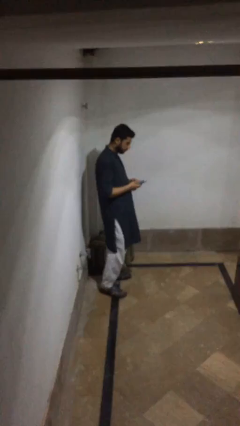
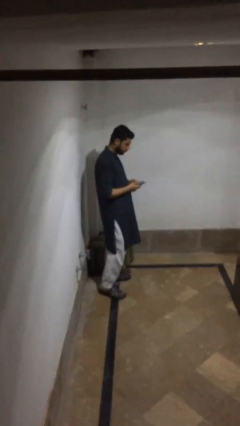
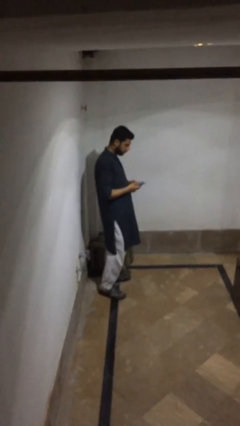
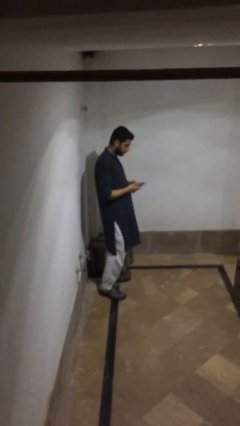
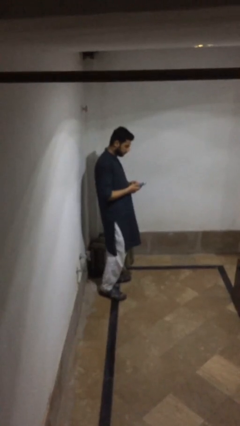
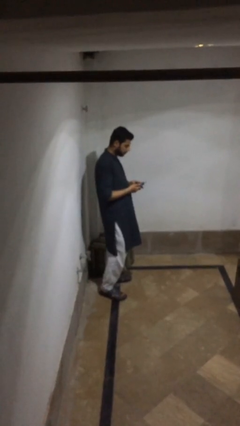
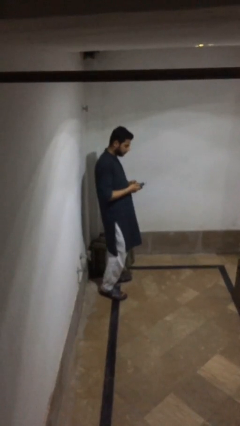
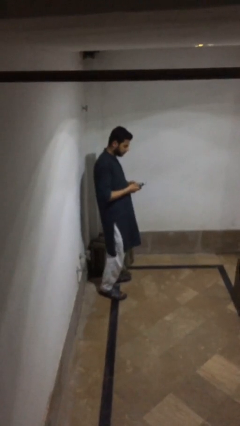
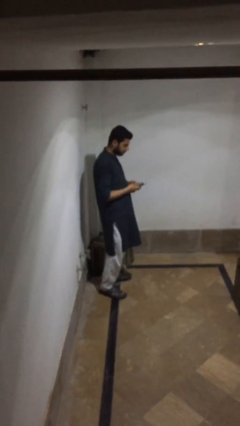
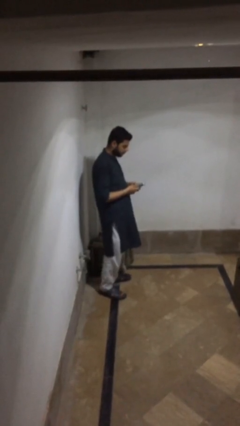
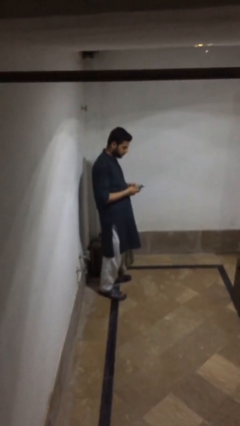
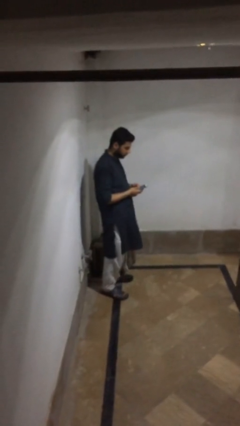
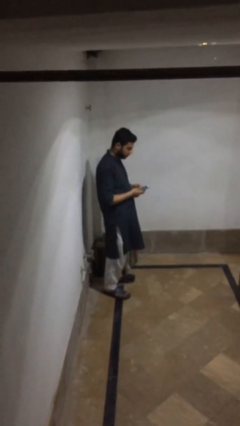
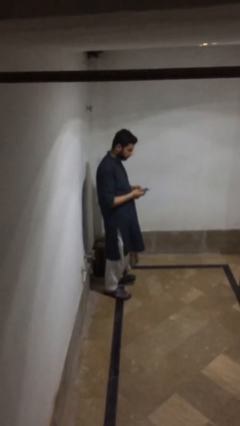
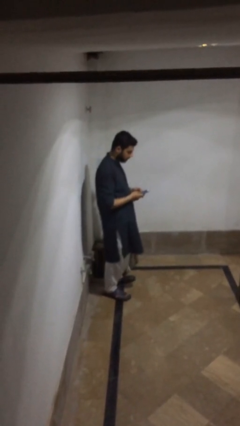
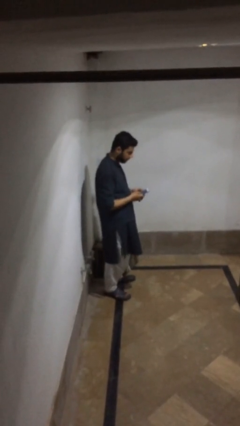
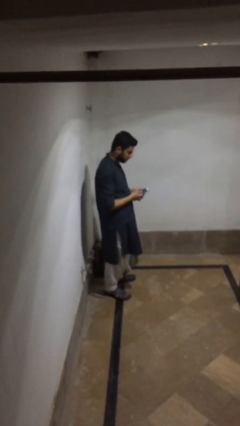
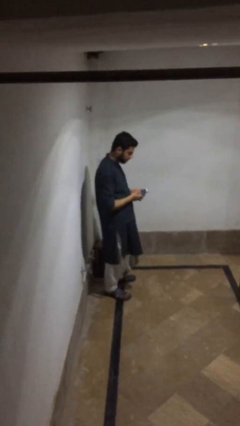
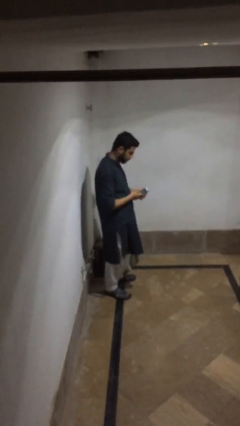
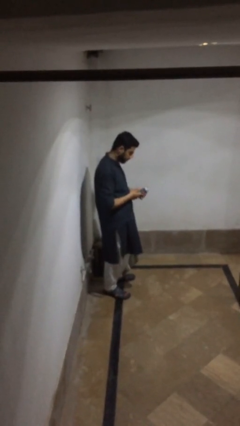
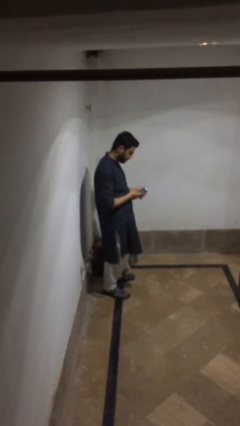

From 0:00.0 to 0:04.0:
person texts on phone

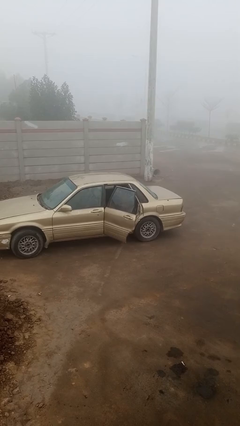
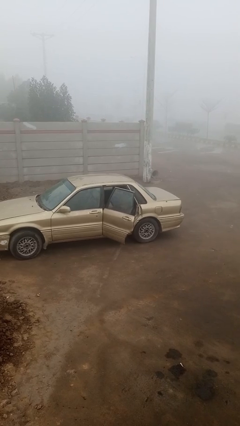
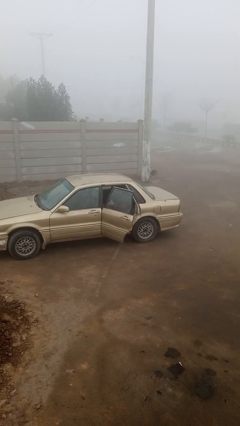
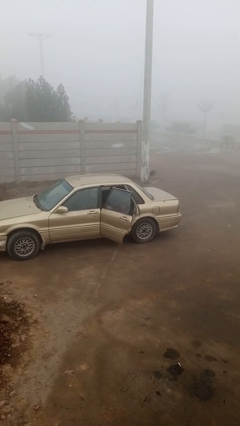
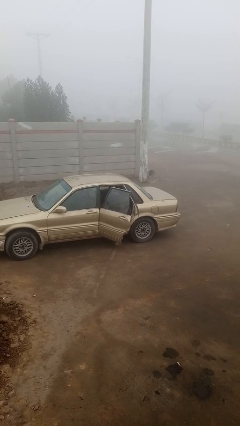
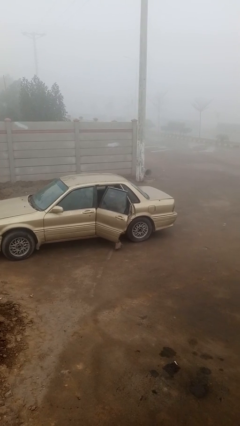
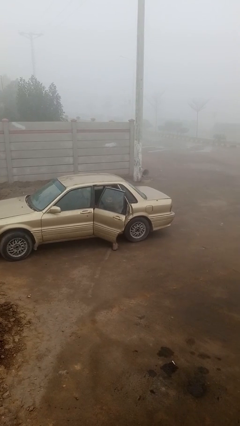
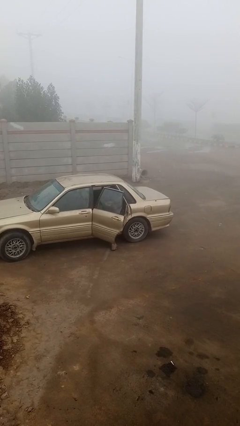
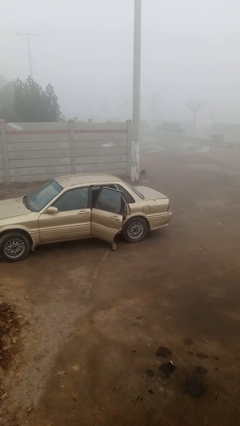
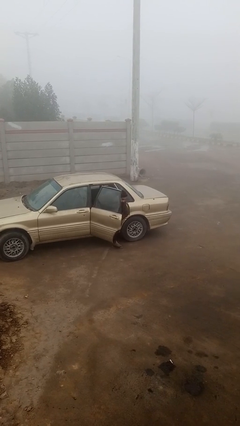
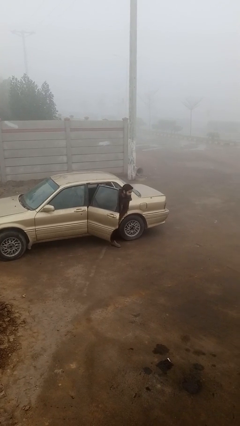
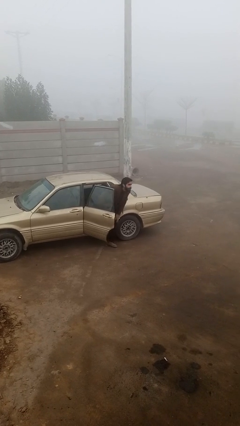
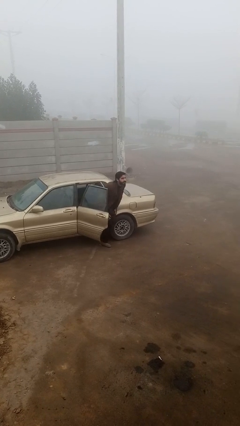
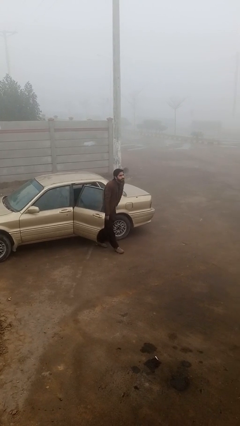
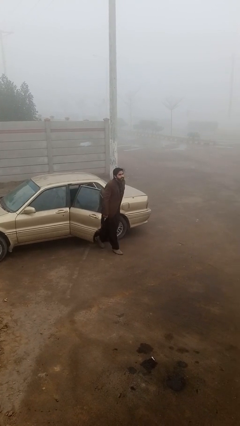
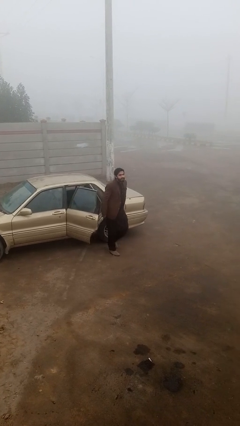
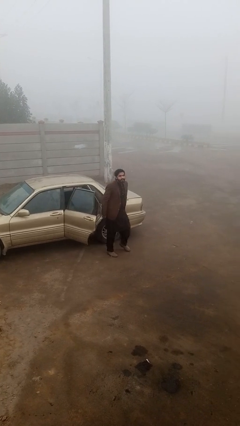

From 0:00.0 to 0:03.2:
person exits car

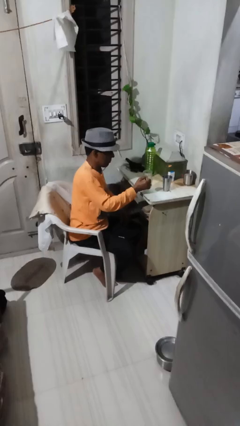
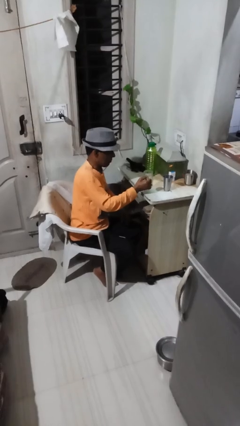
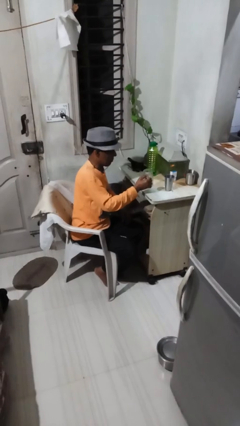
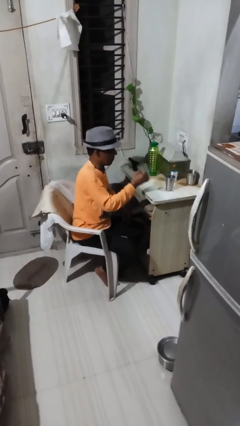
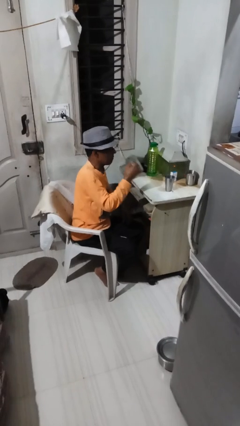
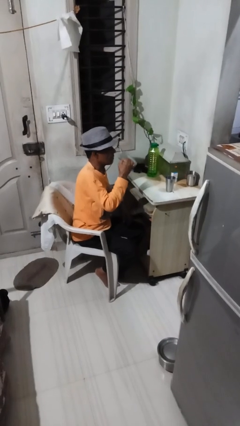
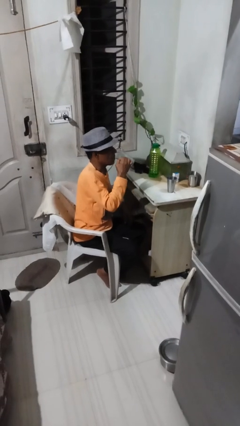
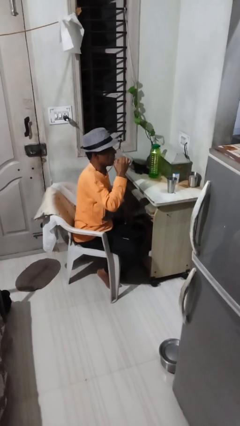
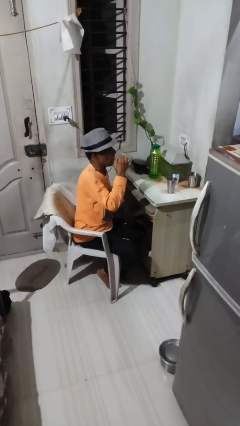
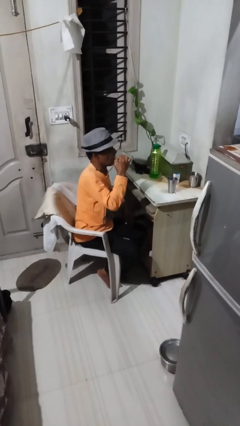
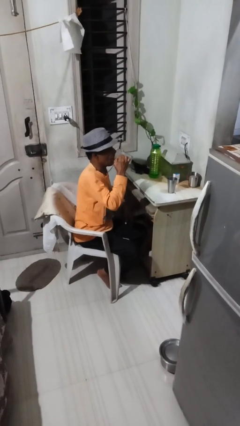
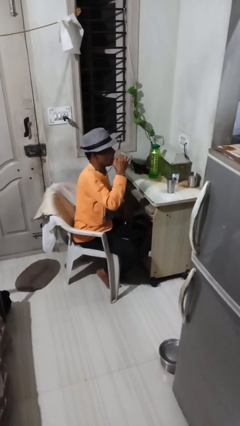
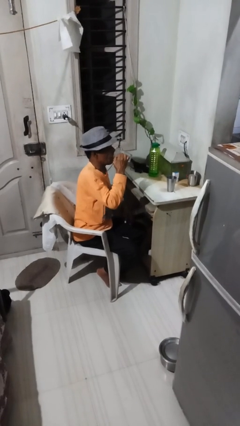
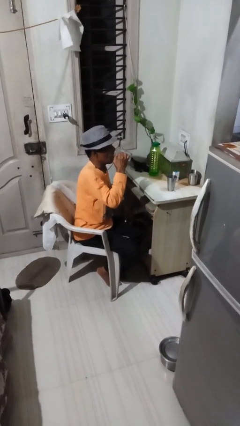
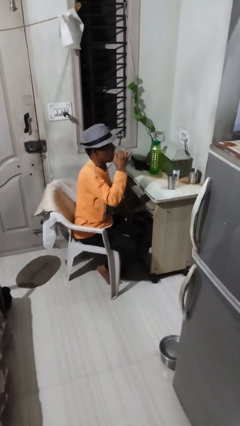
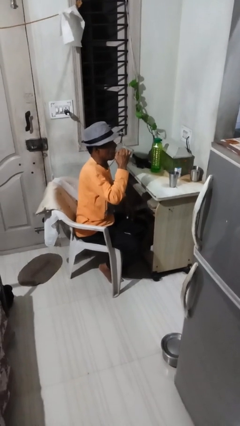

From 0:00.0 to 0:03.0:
person drinks from mug

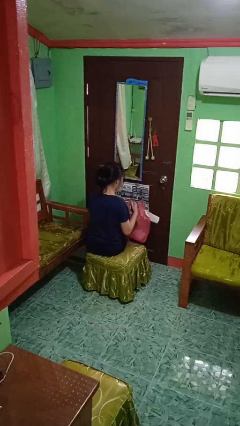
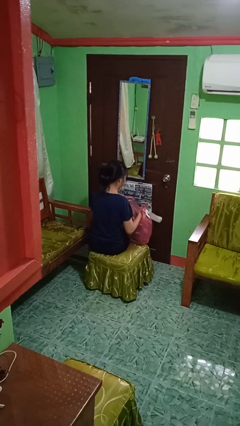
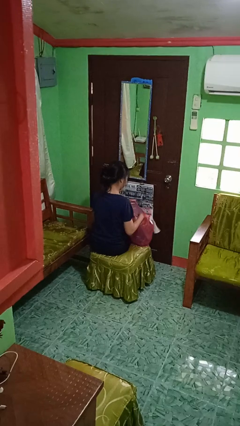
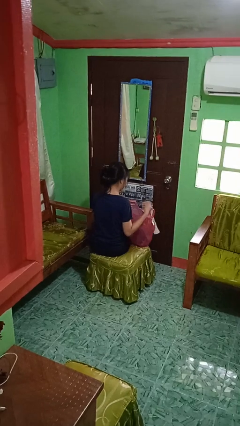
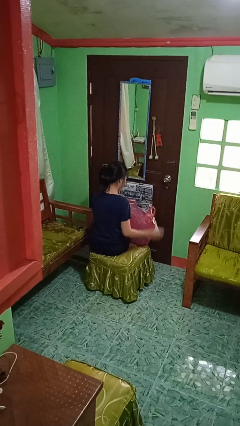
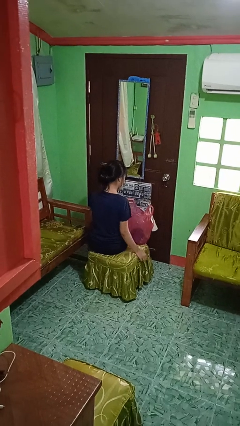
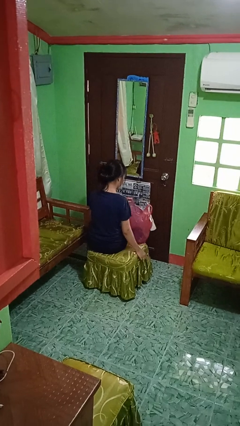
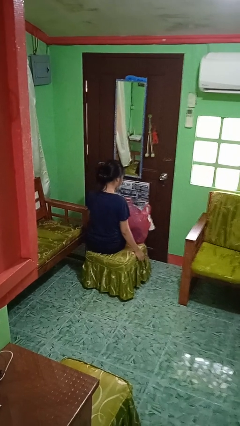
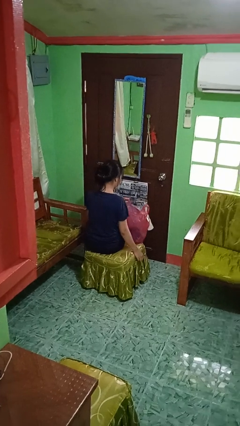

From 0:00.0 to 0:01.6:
person puts object into bag

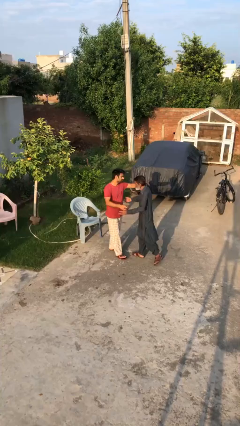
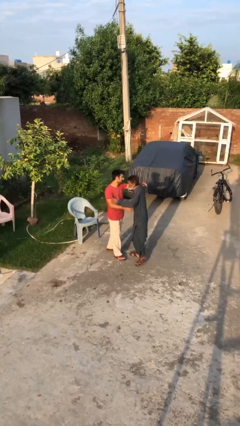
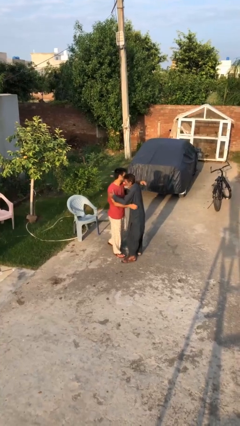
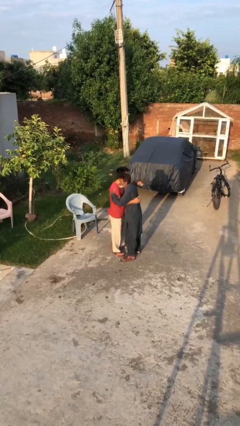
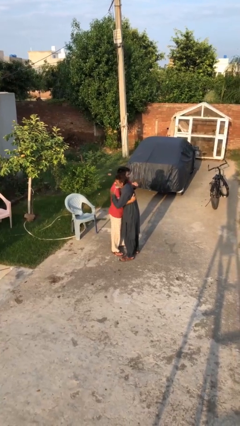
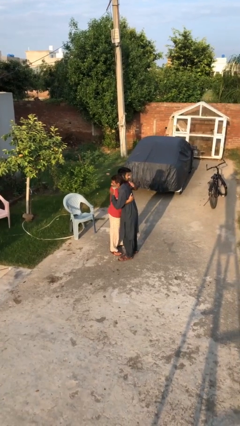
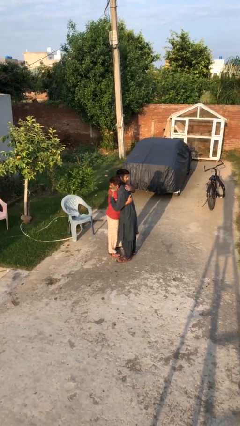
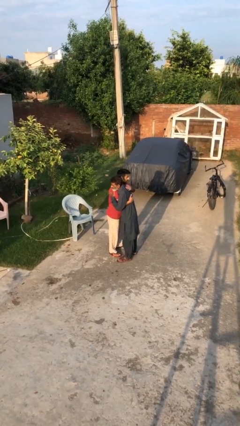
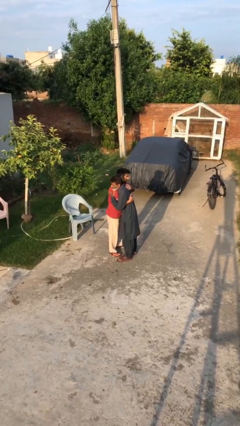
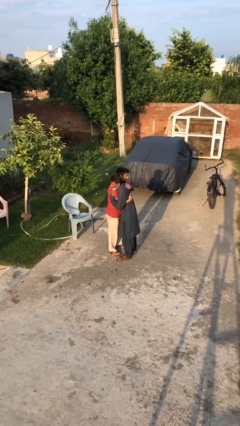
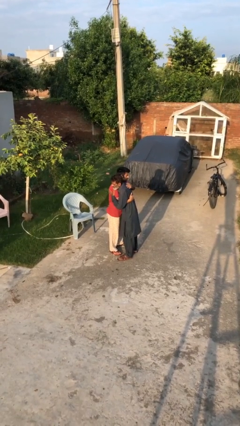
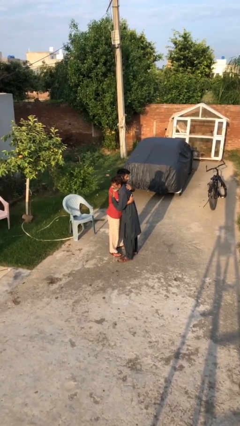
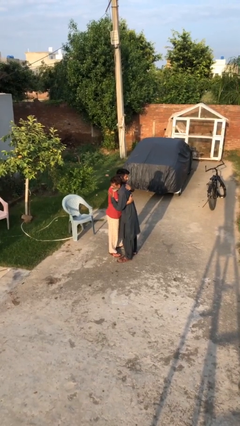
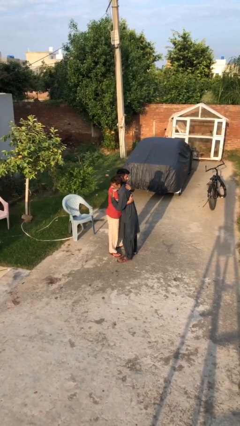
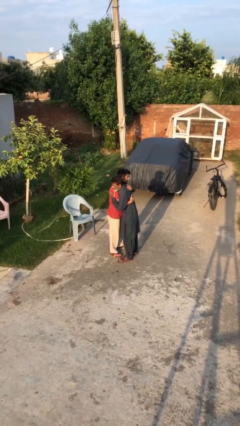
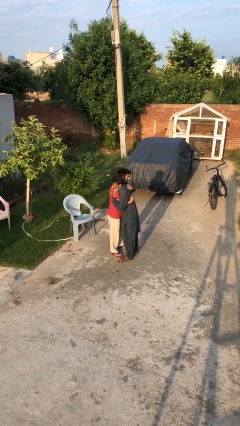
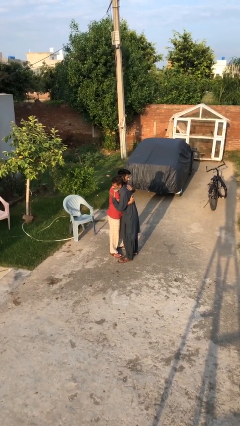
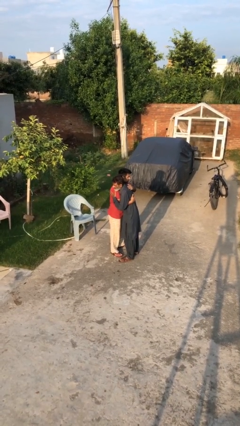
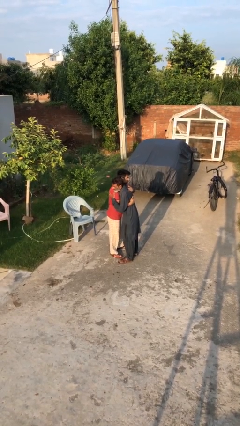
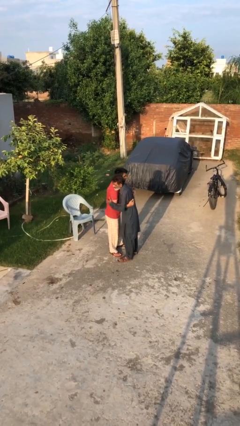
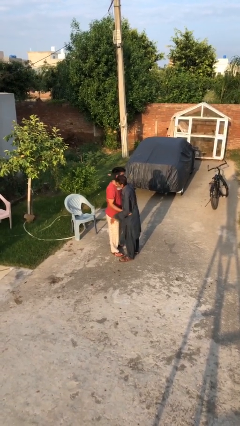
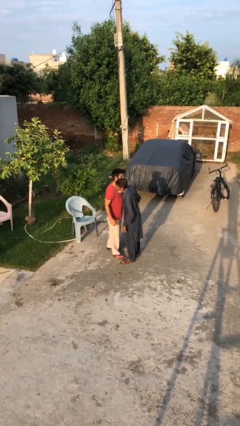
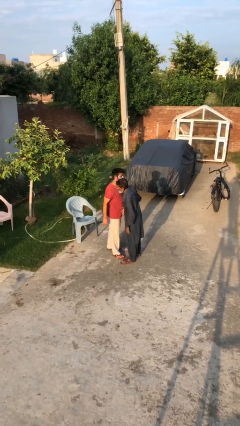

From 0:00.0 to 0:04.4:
person embraces person

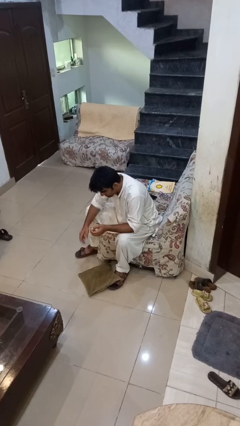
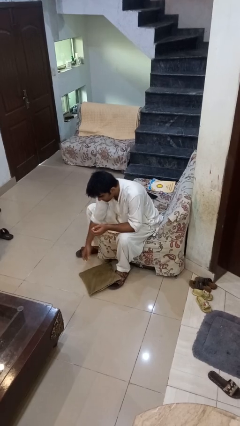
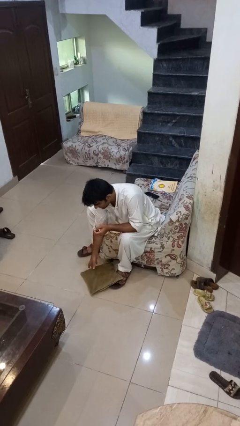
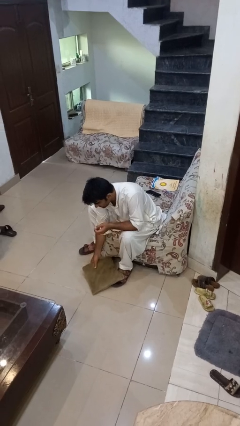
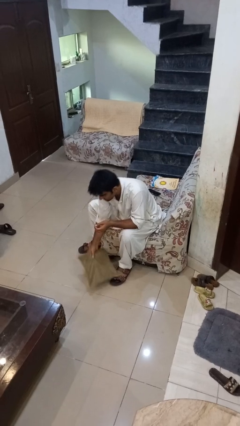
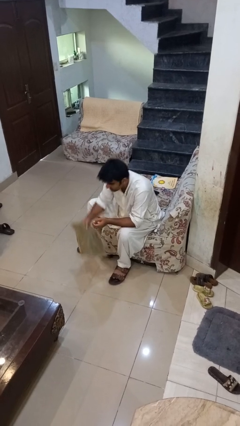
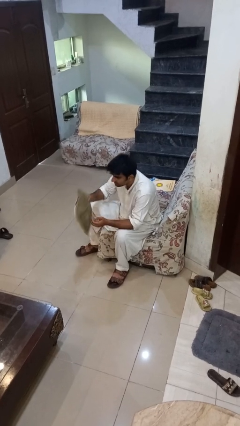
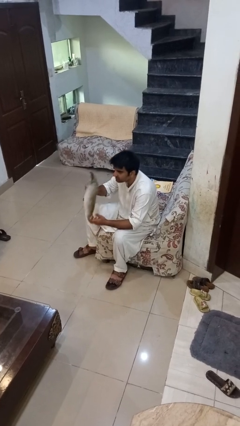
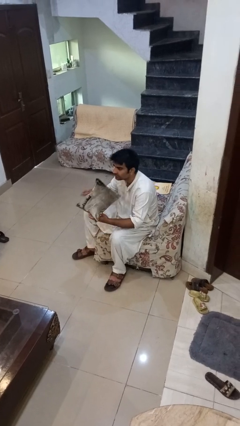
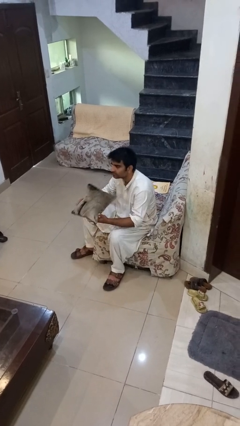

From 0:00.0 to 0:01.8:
person picks up object from floor
